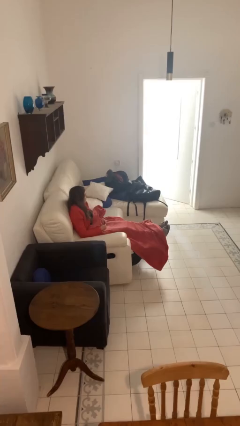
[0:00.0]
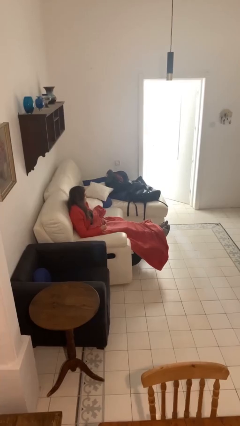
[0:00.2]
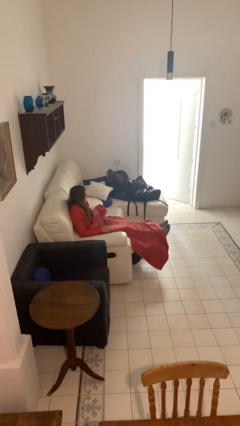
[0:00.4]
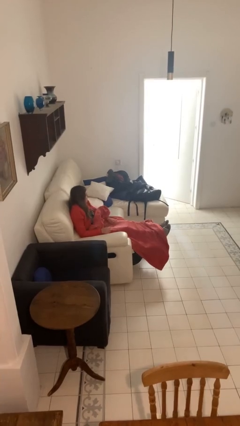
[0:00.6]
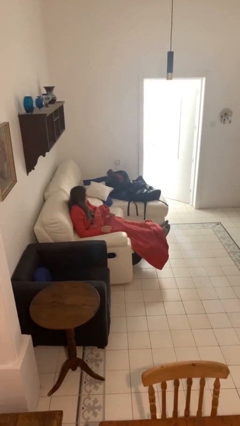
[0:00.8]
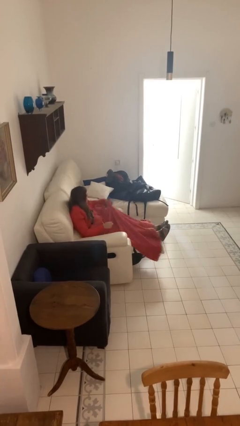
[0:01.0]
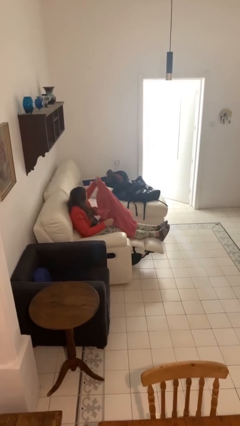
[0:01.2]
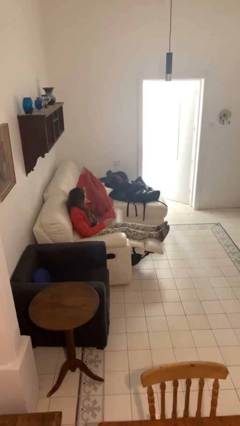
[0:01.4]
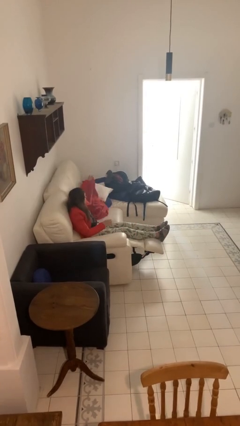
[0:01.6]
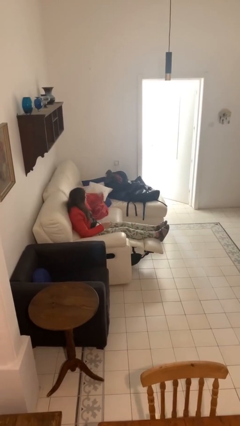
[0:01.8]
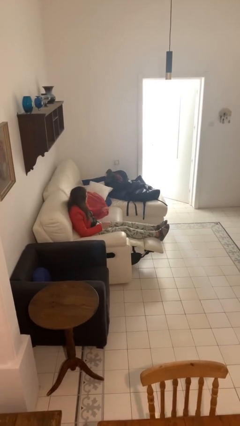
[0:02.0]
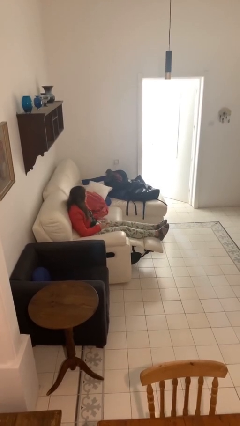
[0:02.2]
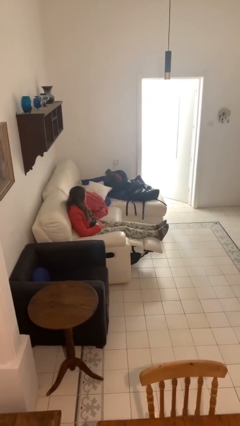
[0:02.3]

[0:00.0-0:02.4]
person uncovers with blanket

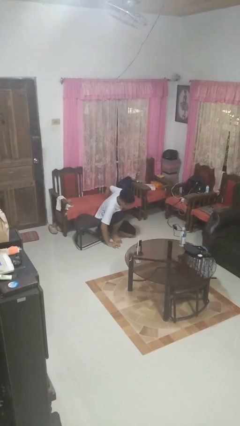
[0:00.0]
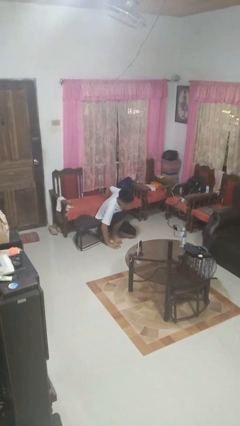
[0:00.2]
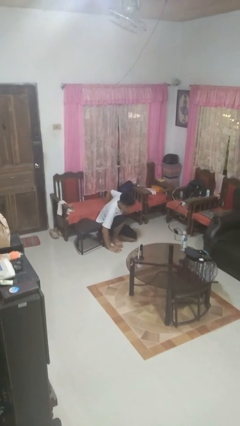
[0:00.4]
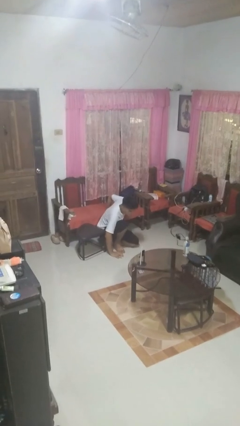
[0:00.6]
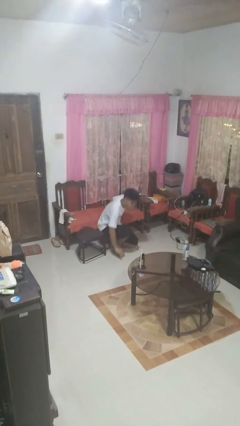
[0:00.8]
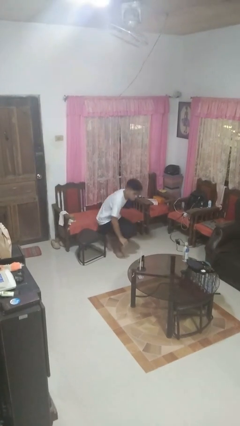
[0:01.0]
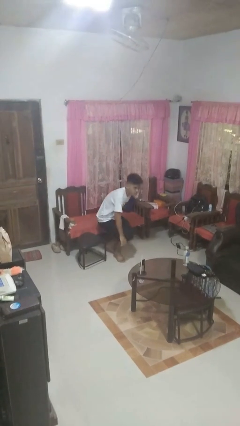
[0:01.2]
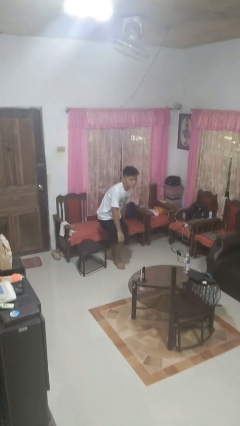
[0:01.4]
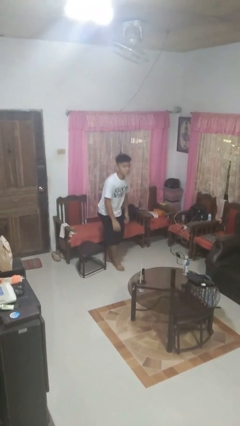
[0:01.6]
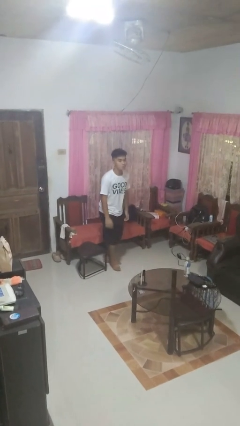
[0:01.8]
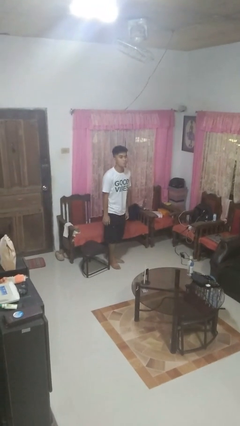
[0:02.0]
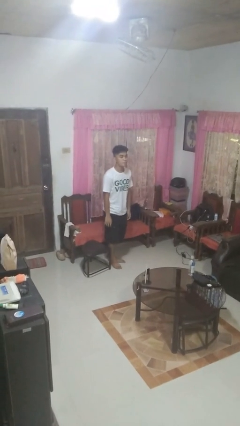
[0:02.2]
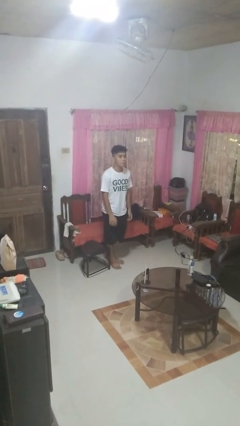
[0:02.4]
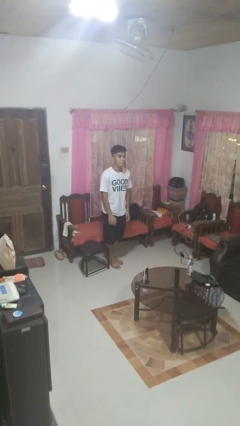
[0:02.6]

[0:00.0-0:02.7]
person stands up from floor

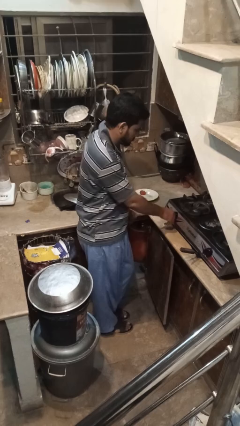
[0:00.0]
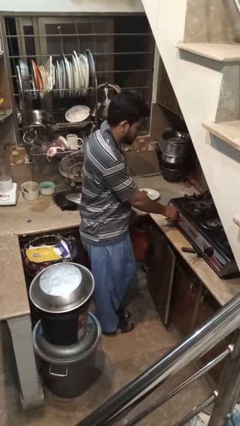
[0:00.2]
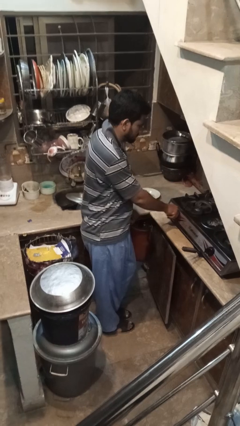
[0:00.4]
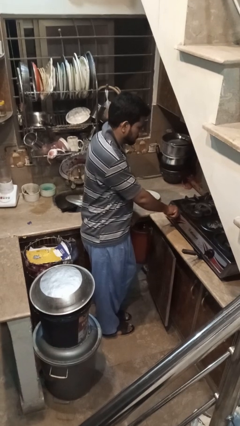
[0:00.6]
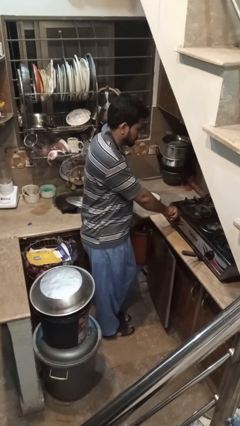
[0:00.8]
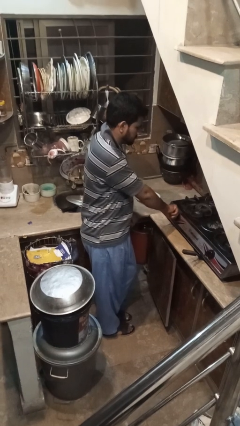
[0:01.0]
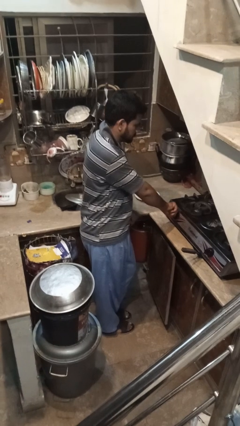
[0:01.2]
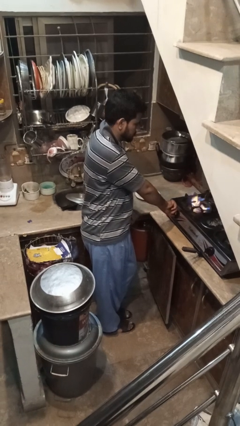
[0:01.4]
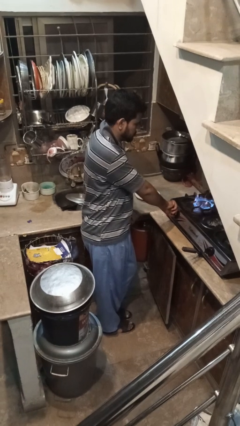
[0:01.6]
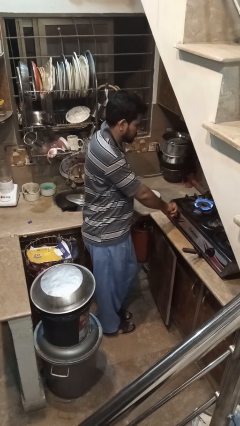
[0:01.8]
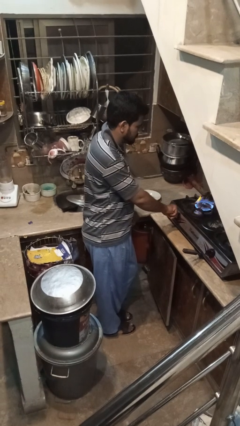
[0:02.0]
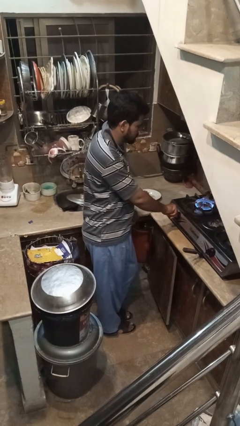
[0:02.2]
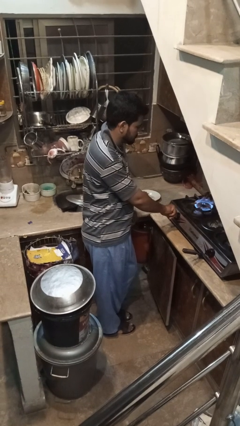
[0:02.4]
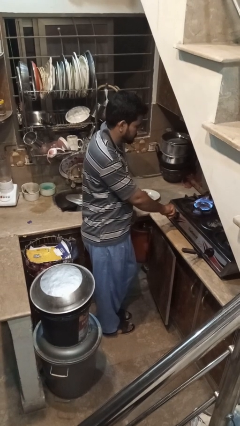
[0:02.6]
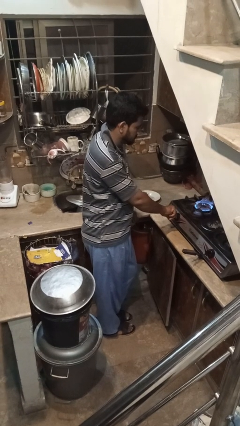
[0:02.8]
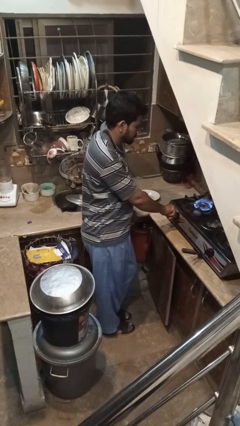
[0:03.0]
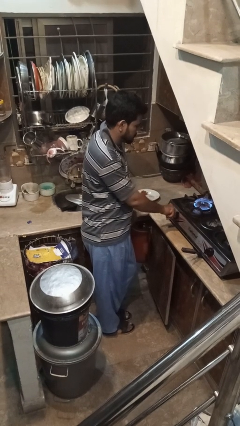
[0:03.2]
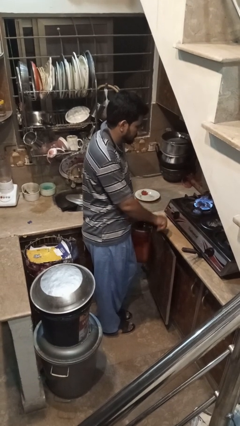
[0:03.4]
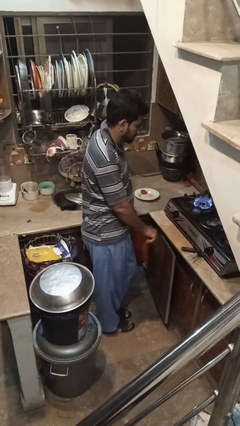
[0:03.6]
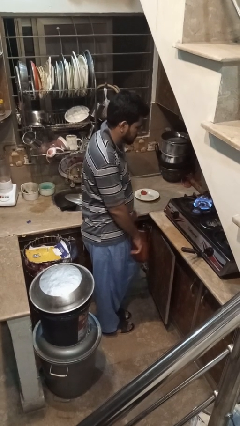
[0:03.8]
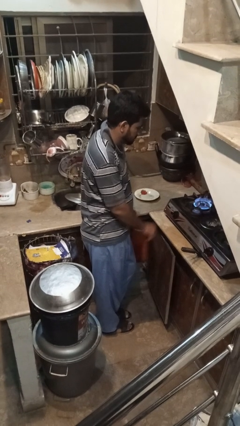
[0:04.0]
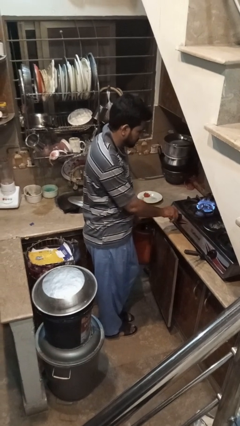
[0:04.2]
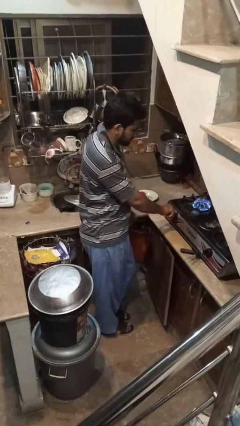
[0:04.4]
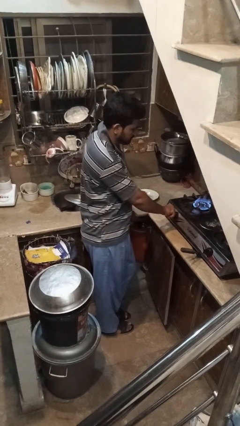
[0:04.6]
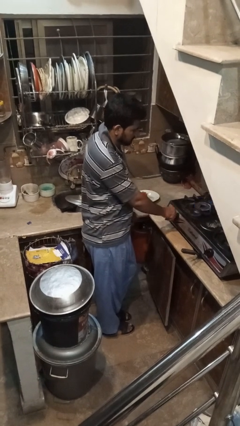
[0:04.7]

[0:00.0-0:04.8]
person turns on stovetop

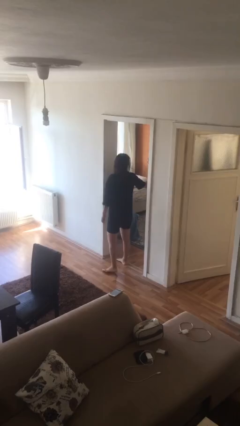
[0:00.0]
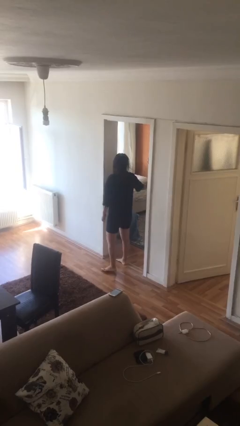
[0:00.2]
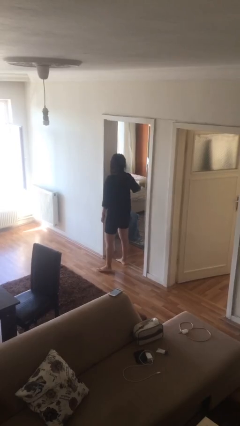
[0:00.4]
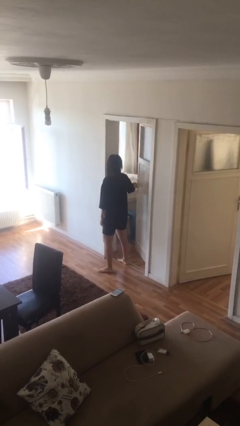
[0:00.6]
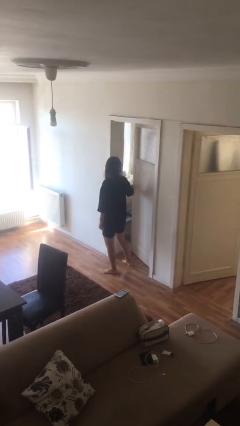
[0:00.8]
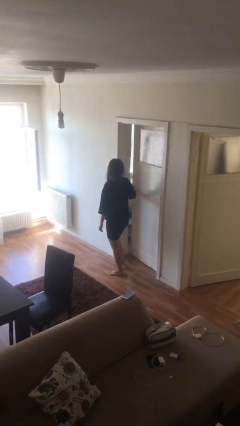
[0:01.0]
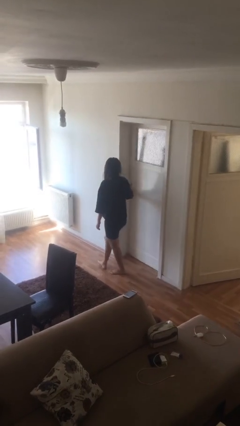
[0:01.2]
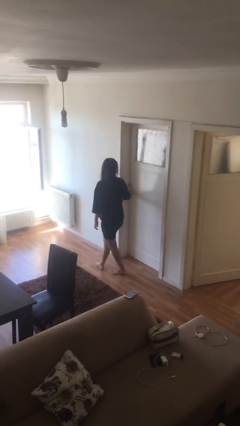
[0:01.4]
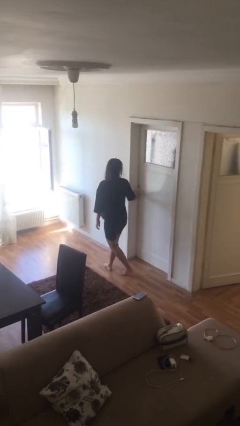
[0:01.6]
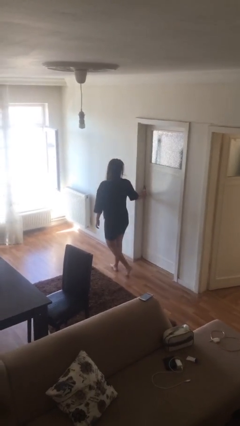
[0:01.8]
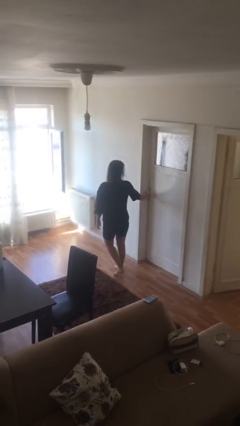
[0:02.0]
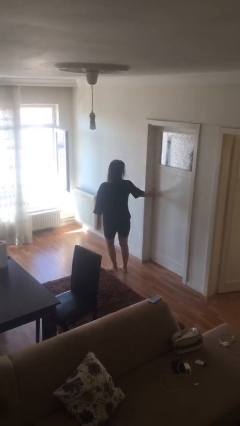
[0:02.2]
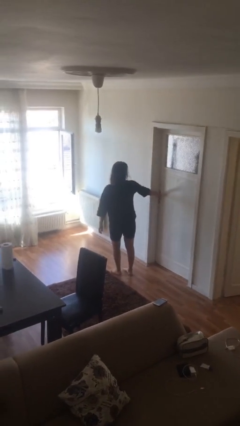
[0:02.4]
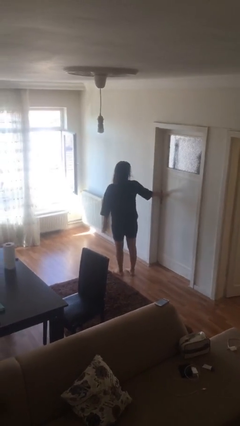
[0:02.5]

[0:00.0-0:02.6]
person closes facility door

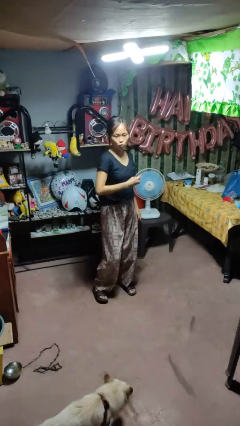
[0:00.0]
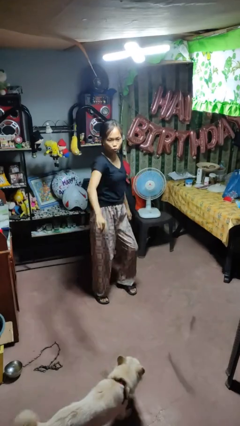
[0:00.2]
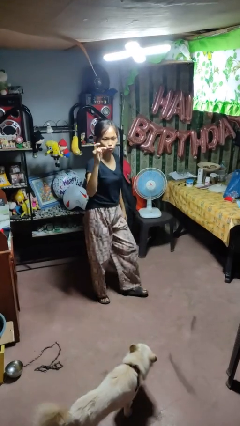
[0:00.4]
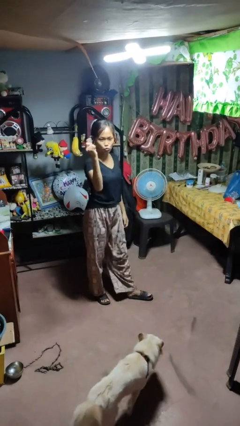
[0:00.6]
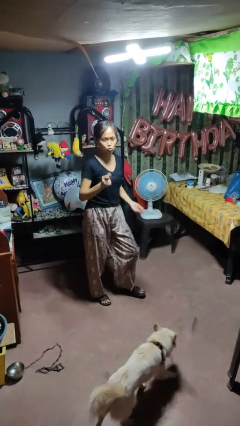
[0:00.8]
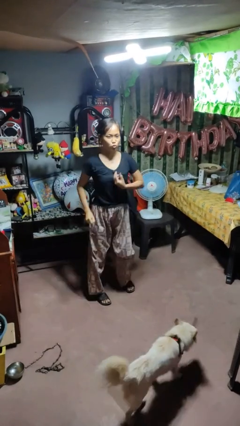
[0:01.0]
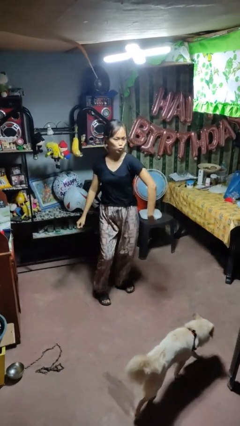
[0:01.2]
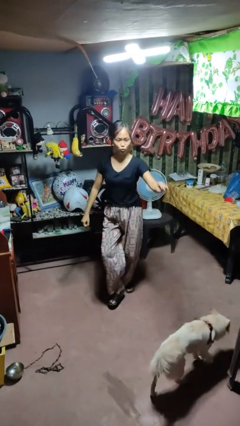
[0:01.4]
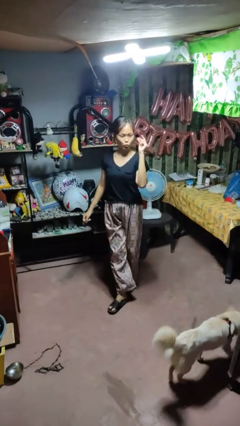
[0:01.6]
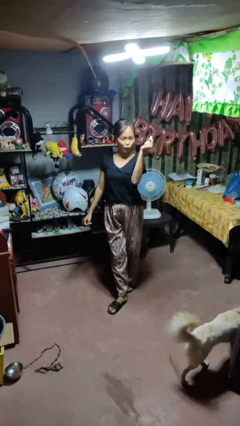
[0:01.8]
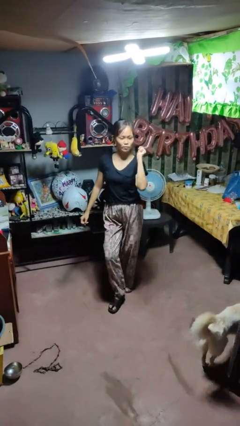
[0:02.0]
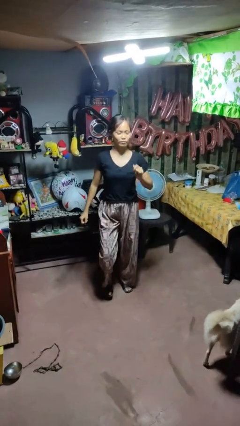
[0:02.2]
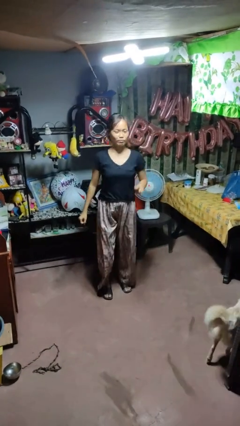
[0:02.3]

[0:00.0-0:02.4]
person dances in place

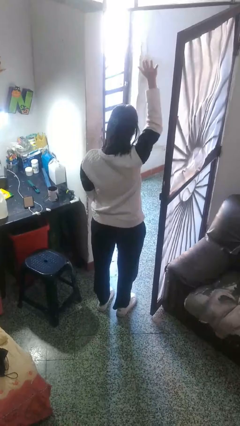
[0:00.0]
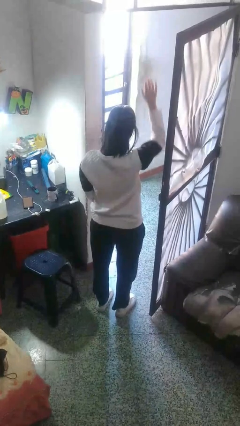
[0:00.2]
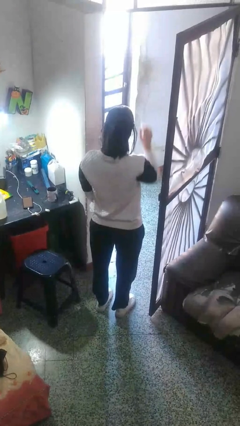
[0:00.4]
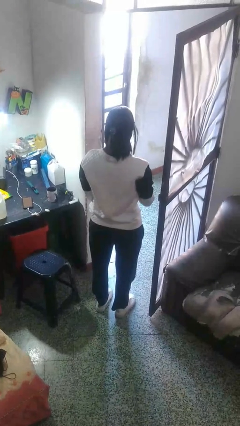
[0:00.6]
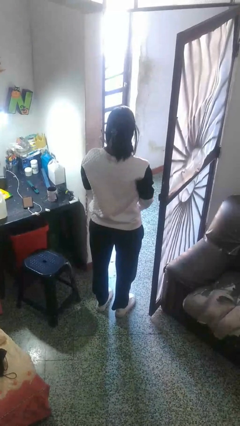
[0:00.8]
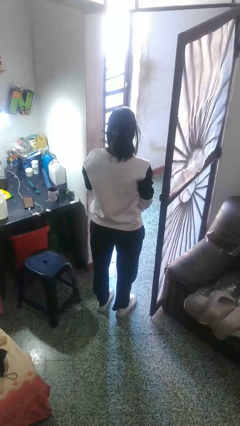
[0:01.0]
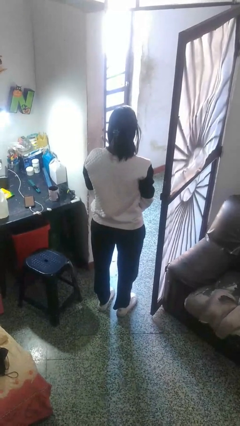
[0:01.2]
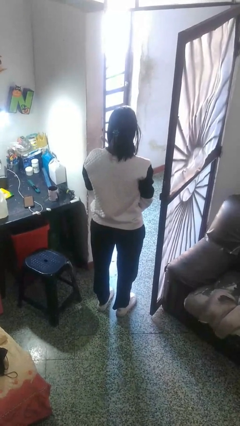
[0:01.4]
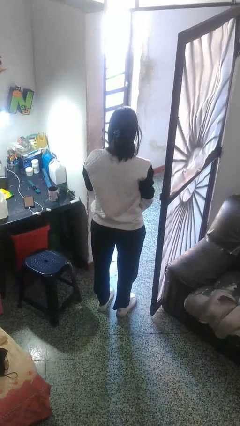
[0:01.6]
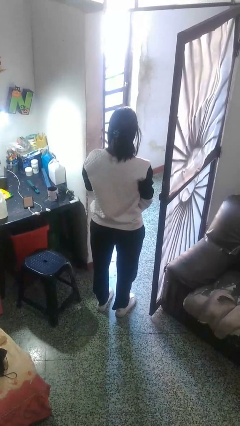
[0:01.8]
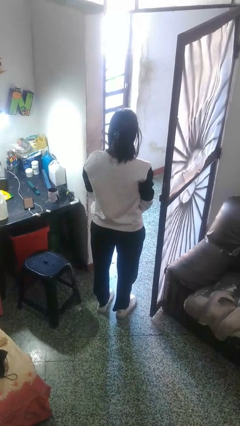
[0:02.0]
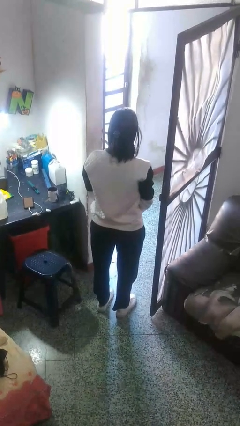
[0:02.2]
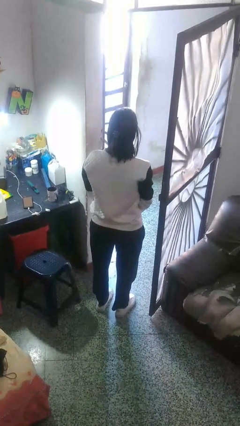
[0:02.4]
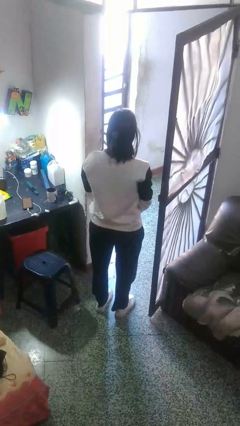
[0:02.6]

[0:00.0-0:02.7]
person gestures lower hand

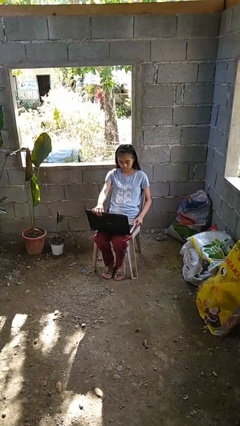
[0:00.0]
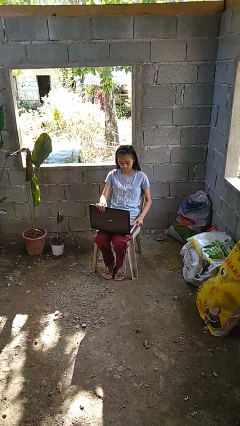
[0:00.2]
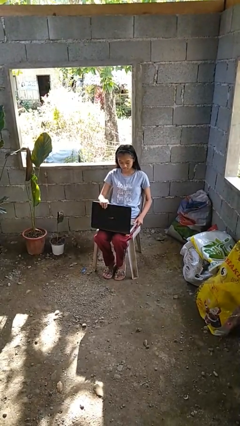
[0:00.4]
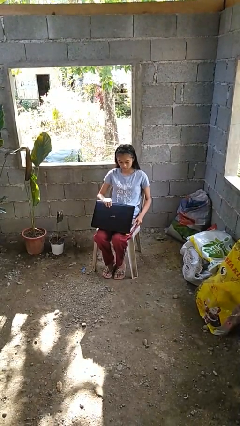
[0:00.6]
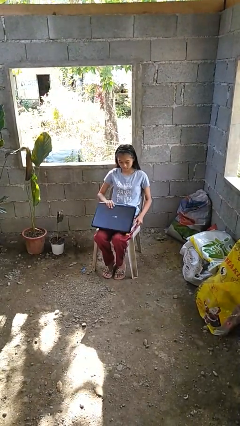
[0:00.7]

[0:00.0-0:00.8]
person closes laptop
